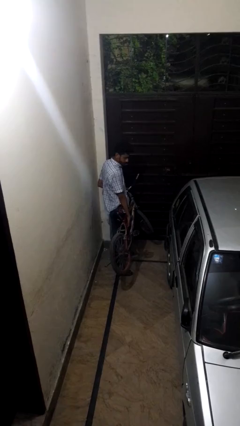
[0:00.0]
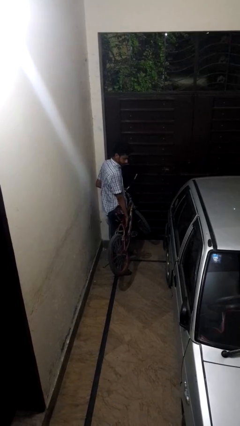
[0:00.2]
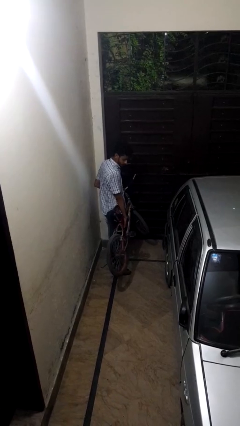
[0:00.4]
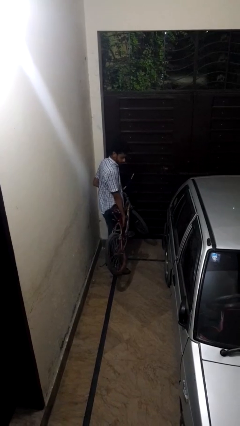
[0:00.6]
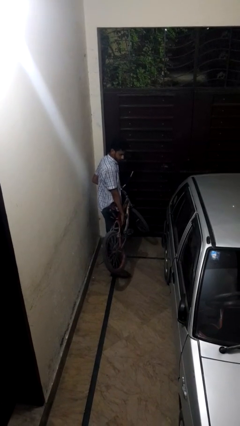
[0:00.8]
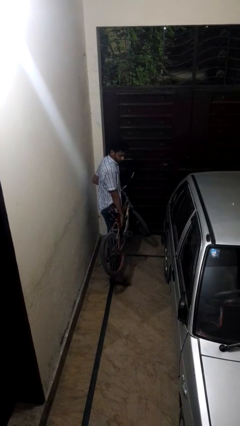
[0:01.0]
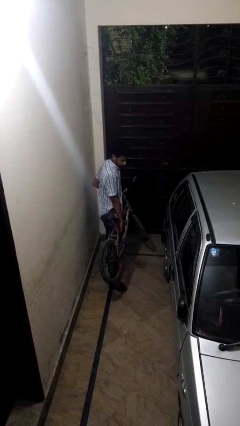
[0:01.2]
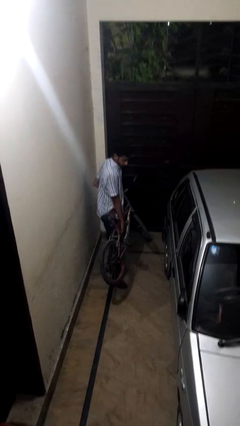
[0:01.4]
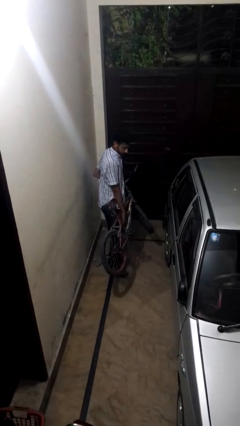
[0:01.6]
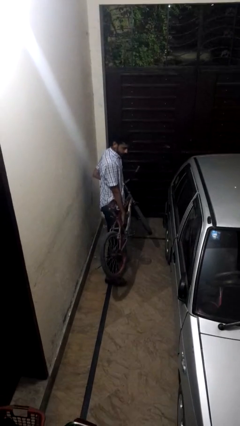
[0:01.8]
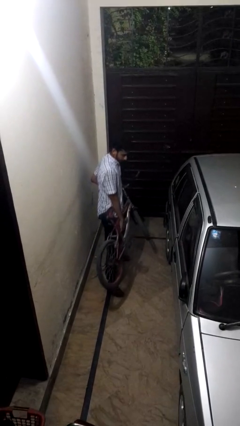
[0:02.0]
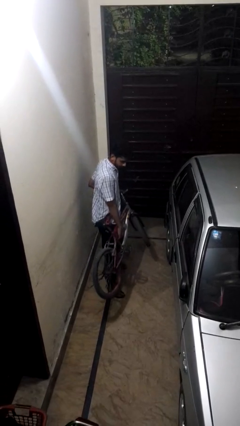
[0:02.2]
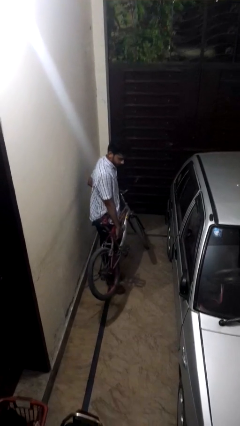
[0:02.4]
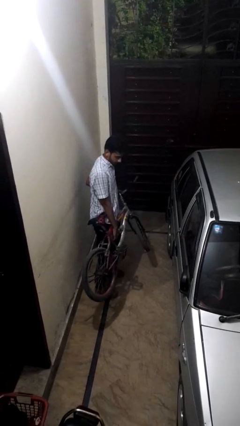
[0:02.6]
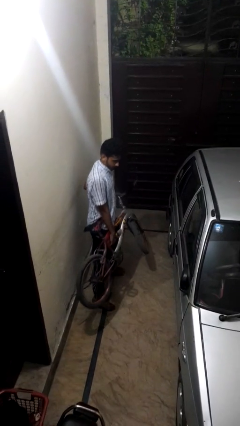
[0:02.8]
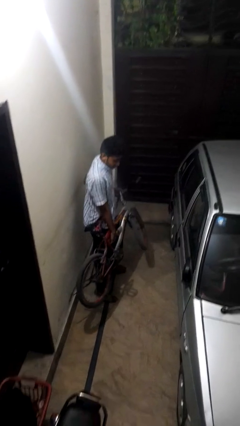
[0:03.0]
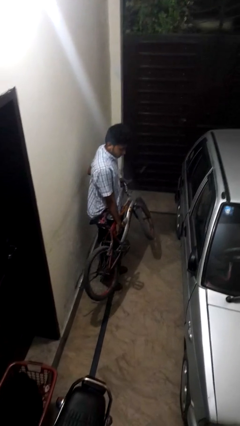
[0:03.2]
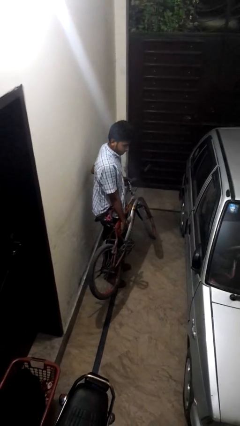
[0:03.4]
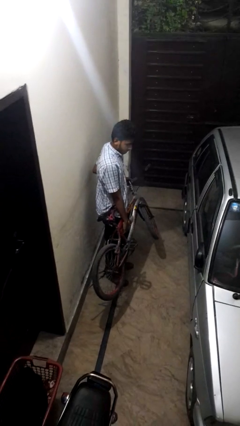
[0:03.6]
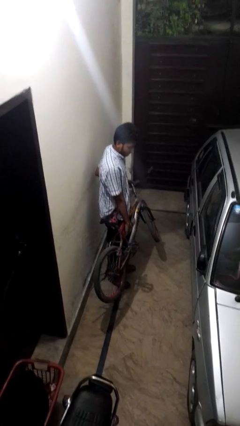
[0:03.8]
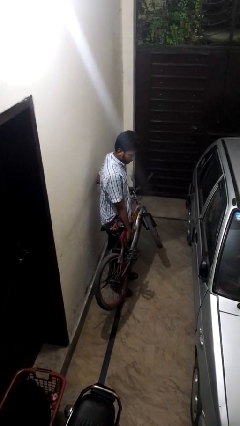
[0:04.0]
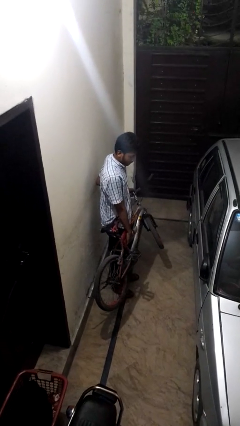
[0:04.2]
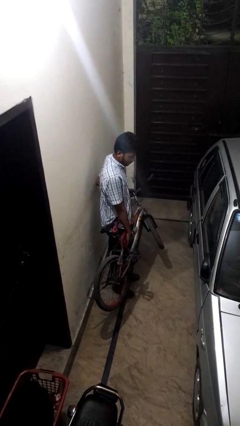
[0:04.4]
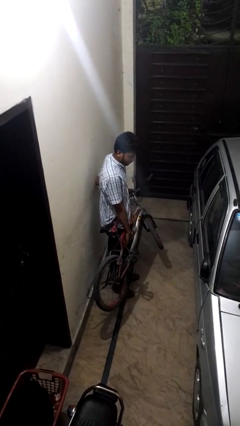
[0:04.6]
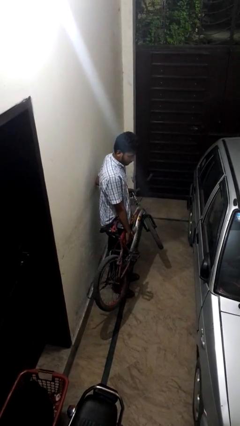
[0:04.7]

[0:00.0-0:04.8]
person carries groceries

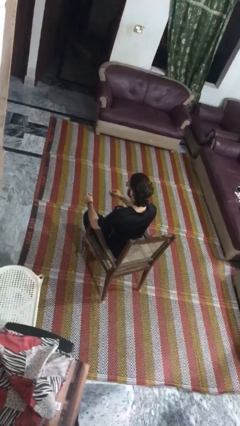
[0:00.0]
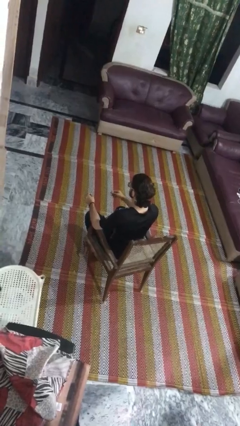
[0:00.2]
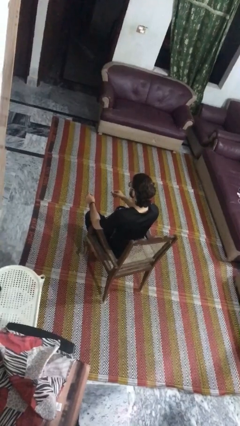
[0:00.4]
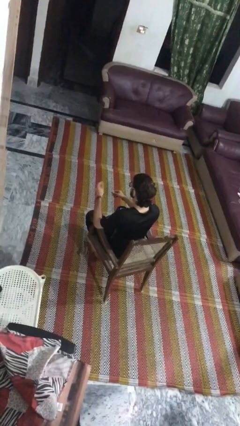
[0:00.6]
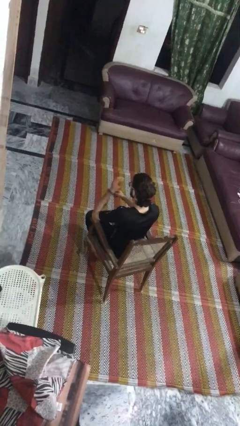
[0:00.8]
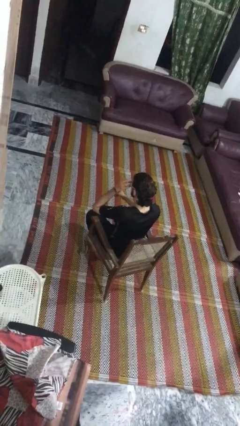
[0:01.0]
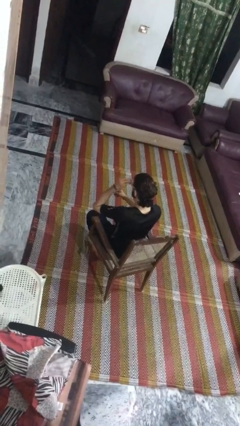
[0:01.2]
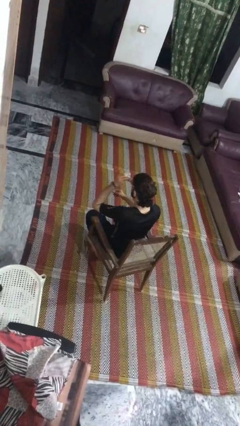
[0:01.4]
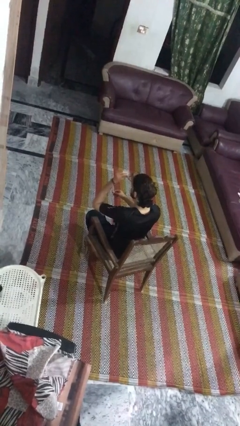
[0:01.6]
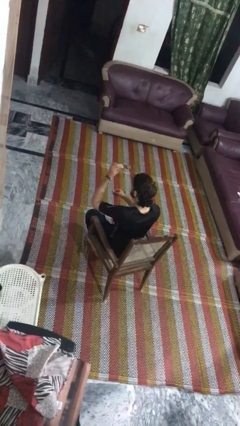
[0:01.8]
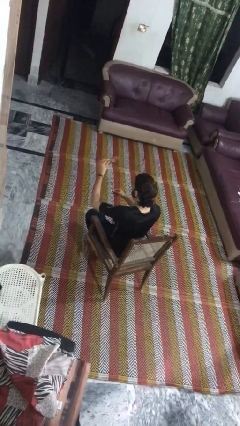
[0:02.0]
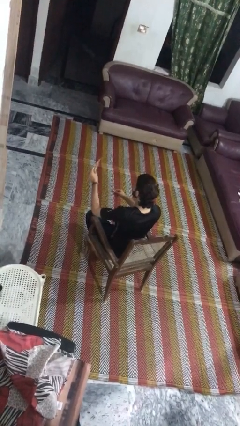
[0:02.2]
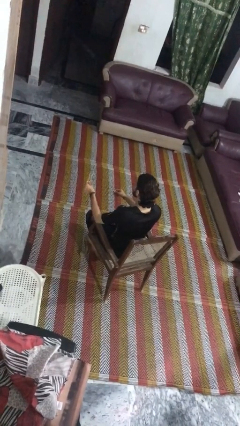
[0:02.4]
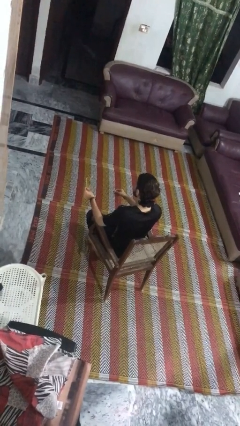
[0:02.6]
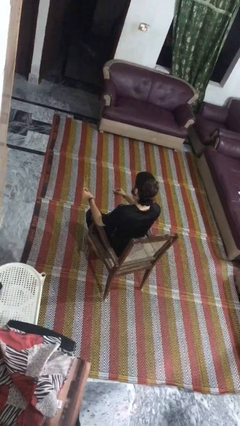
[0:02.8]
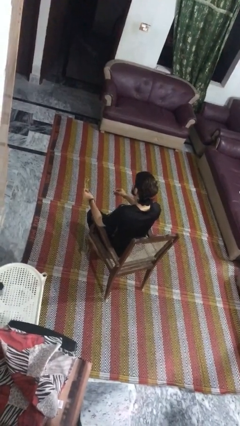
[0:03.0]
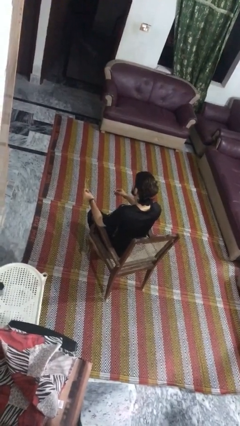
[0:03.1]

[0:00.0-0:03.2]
person takes off glasses

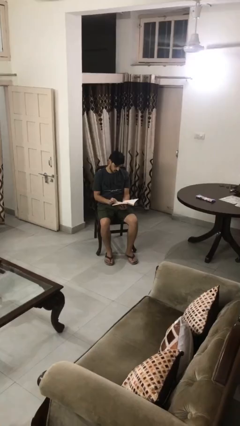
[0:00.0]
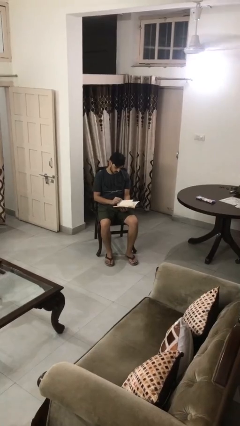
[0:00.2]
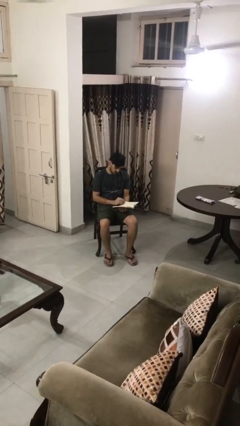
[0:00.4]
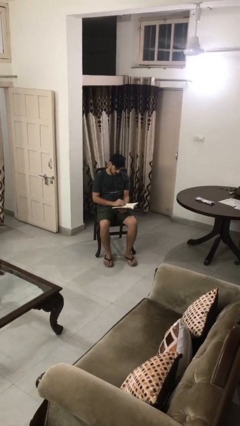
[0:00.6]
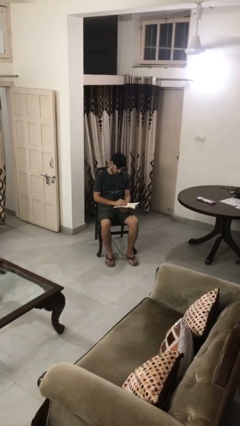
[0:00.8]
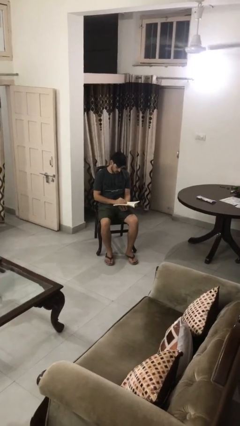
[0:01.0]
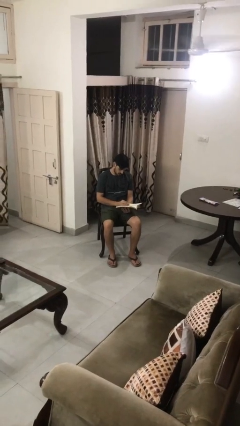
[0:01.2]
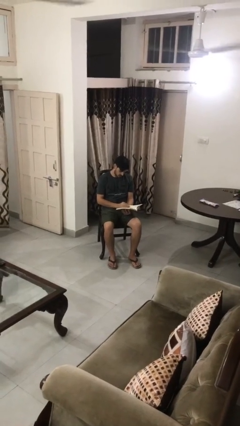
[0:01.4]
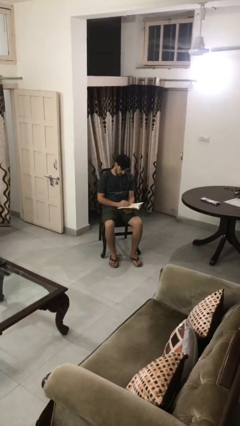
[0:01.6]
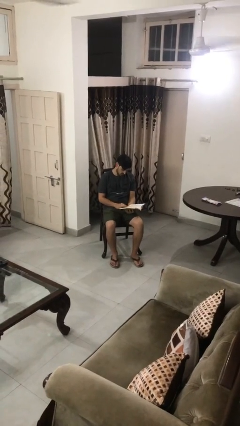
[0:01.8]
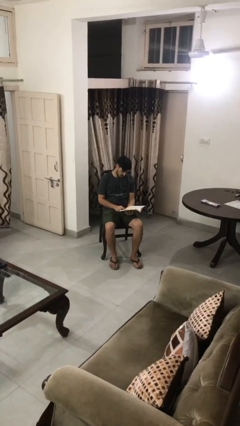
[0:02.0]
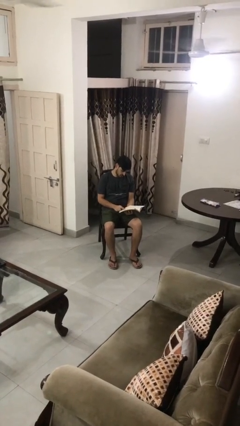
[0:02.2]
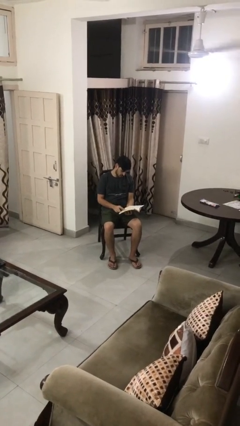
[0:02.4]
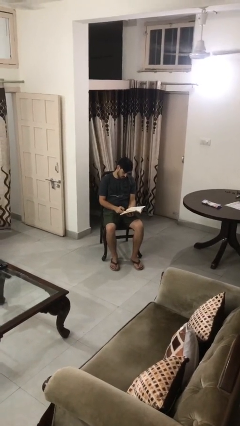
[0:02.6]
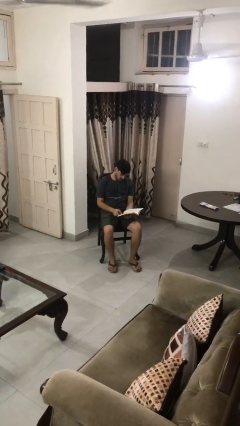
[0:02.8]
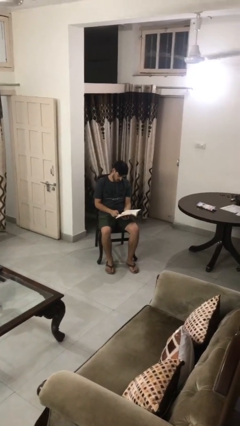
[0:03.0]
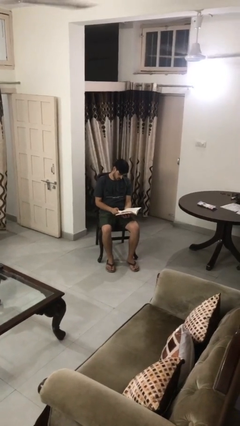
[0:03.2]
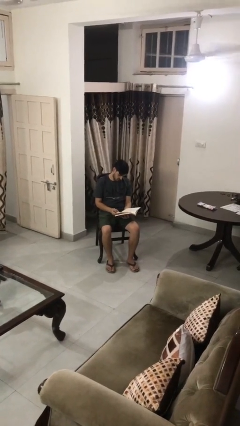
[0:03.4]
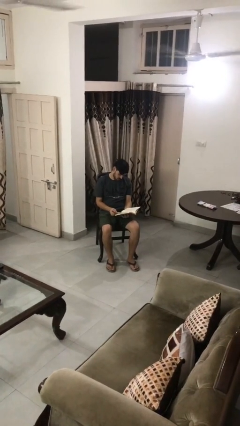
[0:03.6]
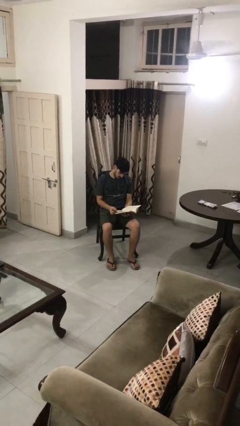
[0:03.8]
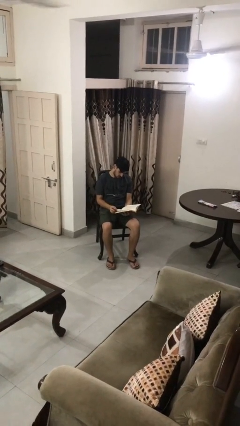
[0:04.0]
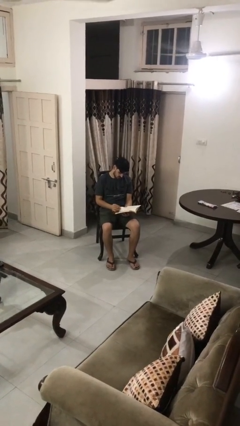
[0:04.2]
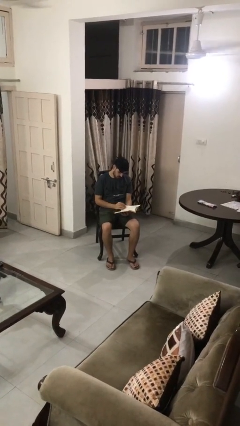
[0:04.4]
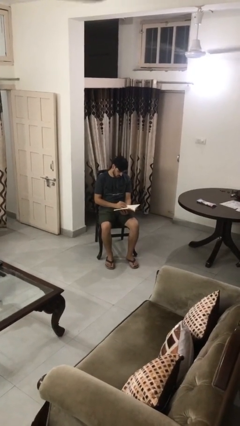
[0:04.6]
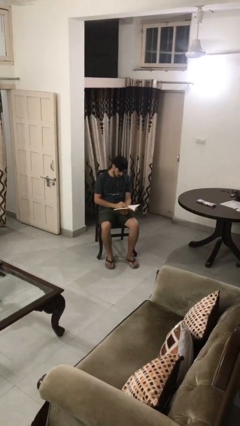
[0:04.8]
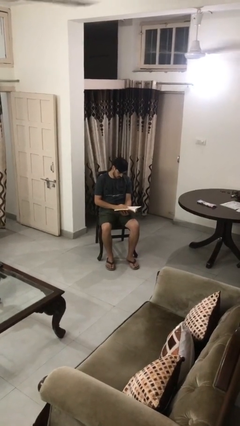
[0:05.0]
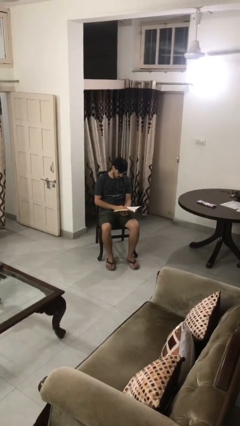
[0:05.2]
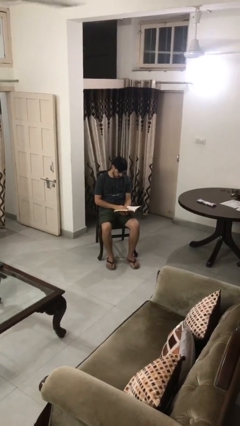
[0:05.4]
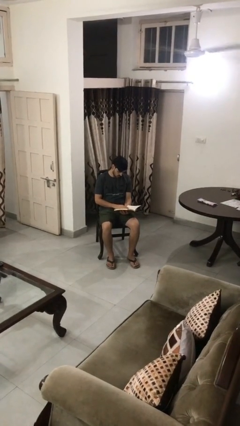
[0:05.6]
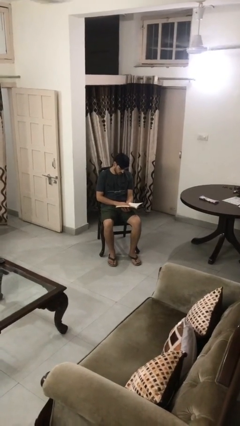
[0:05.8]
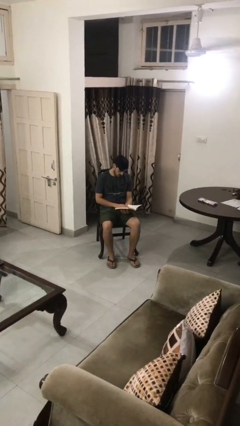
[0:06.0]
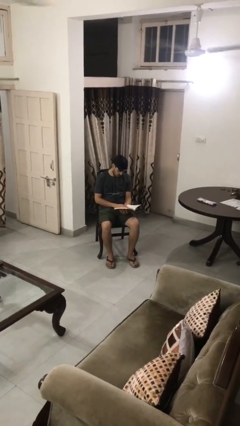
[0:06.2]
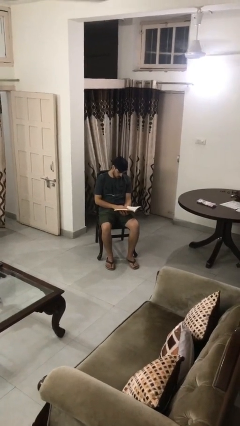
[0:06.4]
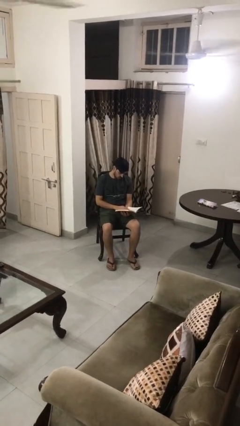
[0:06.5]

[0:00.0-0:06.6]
person reads book

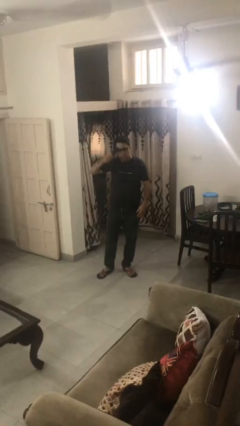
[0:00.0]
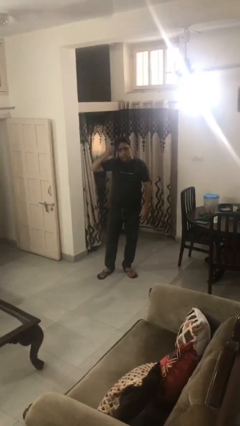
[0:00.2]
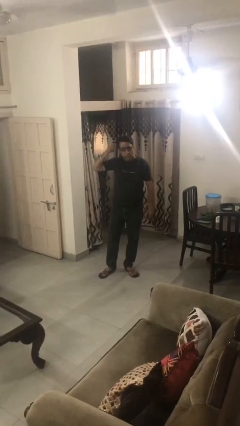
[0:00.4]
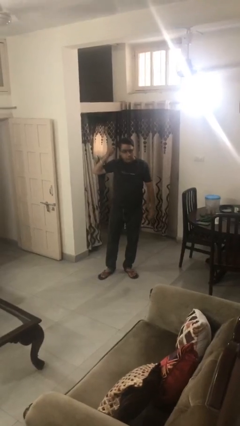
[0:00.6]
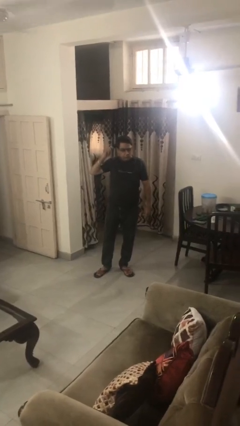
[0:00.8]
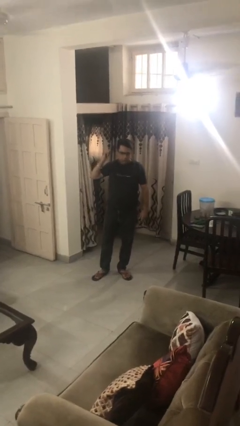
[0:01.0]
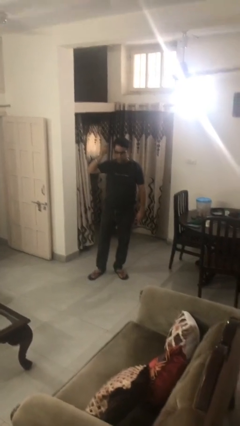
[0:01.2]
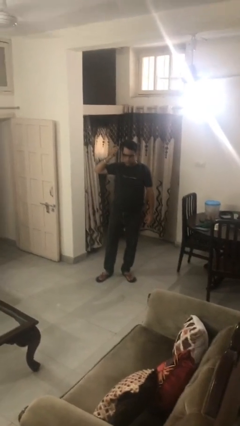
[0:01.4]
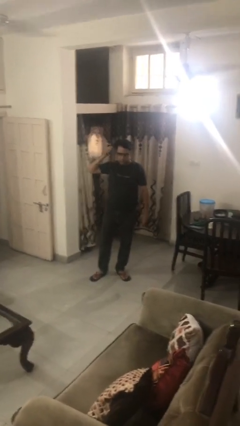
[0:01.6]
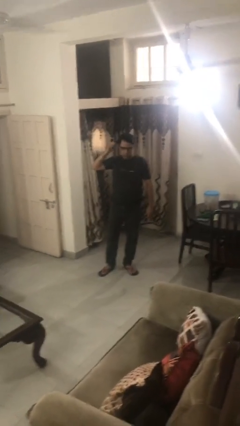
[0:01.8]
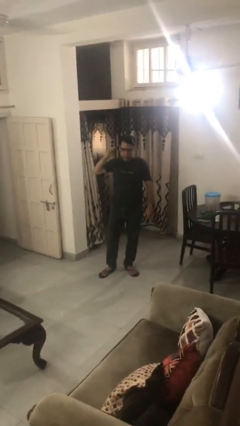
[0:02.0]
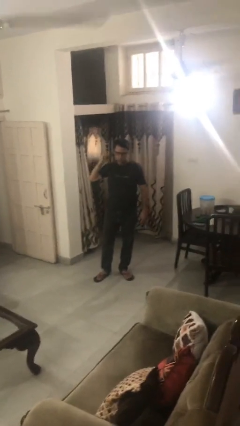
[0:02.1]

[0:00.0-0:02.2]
person brushes hair

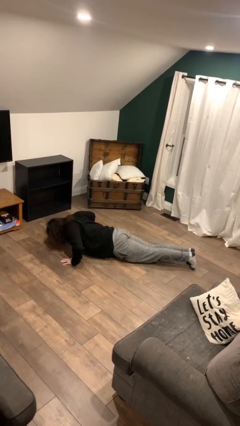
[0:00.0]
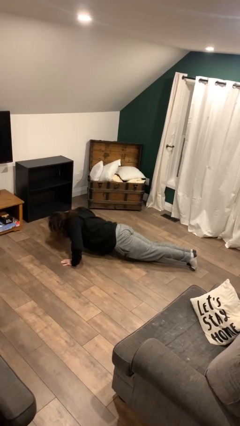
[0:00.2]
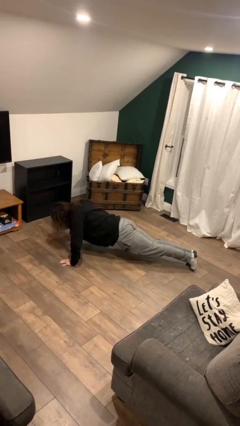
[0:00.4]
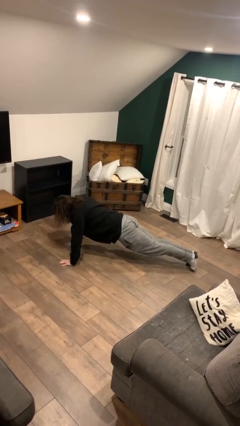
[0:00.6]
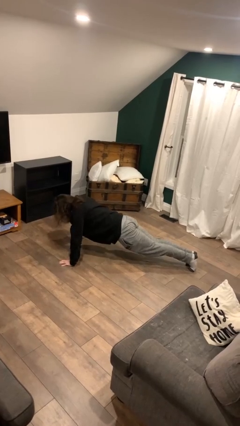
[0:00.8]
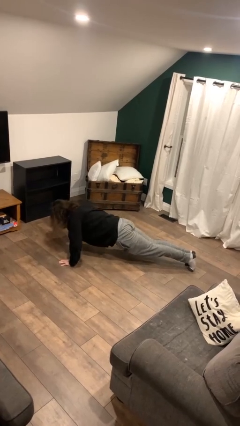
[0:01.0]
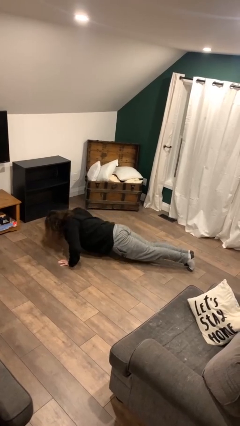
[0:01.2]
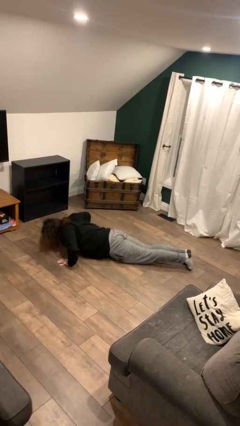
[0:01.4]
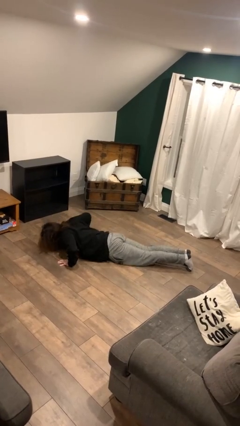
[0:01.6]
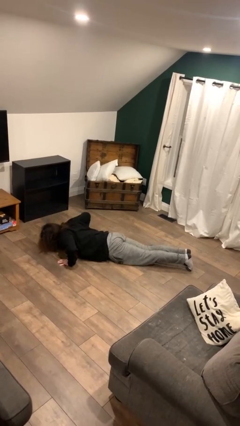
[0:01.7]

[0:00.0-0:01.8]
person exercises with pushup
